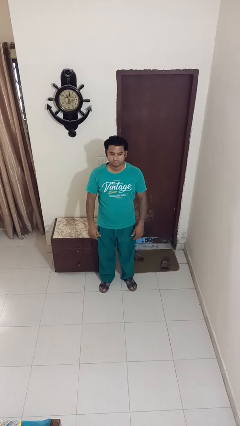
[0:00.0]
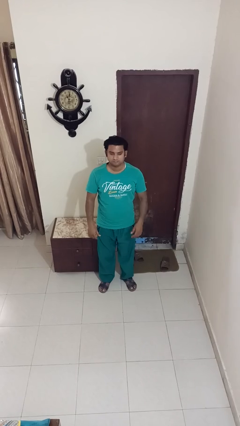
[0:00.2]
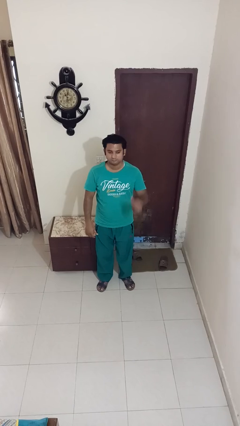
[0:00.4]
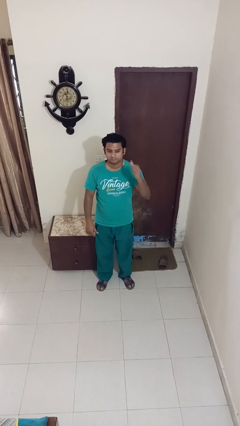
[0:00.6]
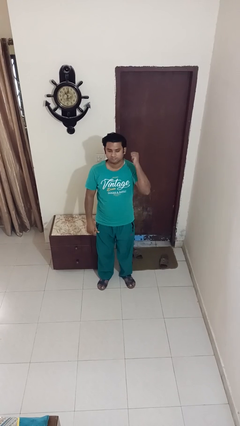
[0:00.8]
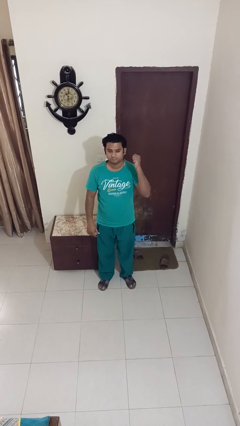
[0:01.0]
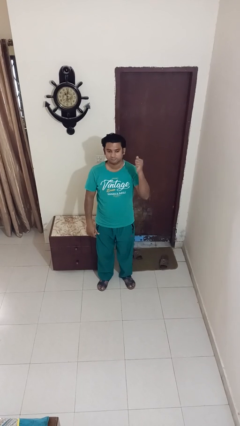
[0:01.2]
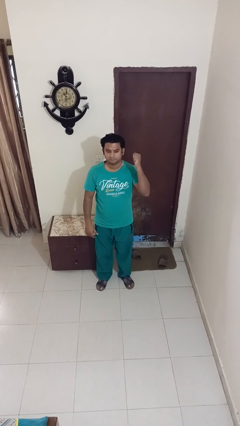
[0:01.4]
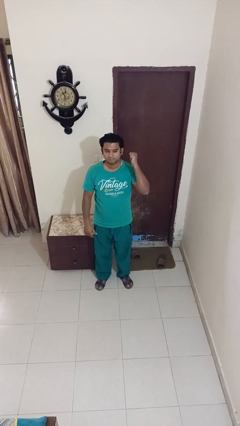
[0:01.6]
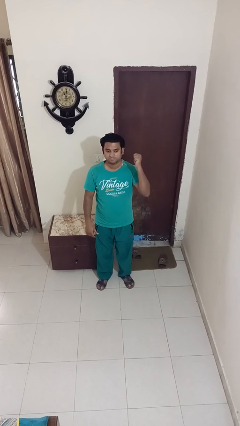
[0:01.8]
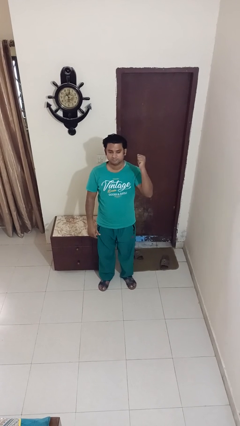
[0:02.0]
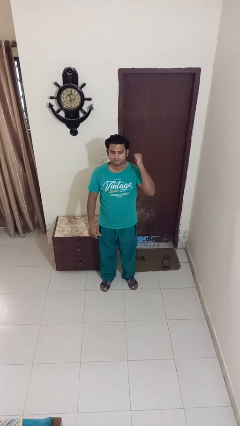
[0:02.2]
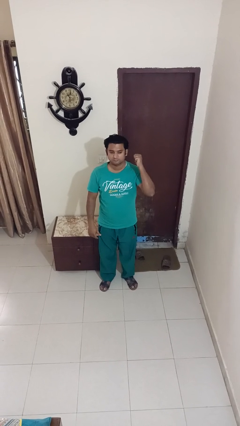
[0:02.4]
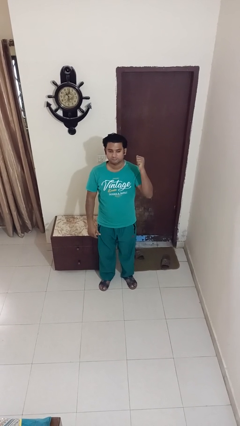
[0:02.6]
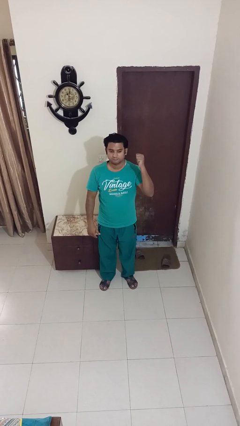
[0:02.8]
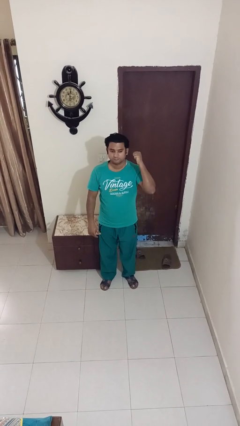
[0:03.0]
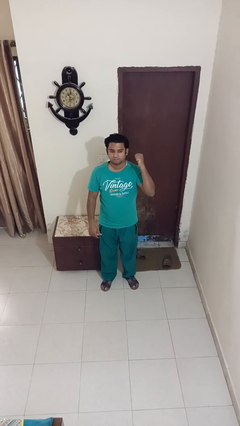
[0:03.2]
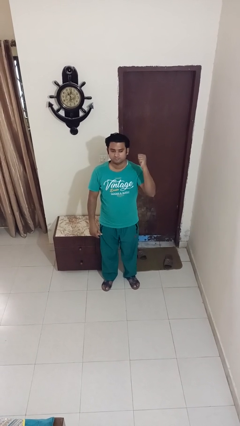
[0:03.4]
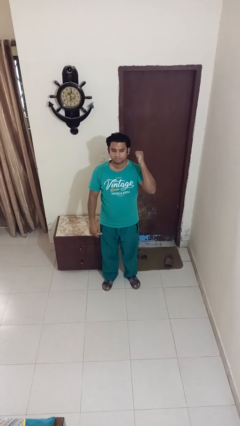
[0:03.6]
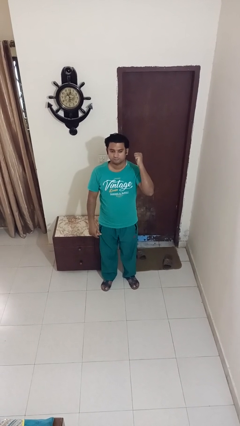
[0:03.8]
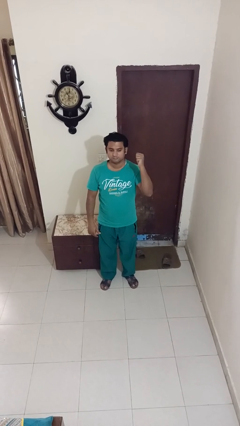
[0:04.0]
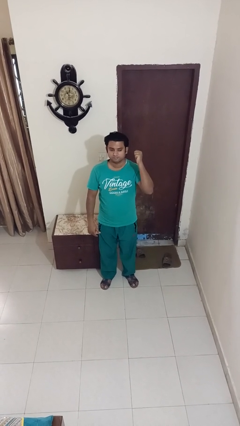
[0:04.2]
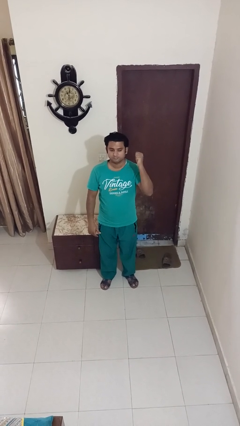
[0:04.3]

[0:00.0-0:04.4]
person gestures behind me

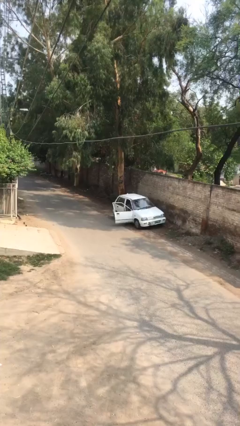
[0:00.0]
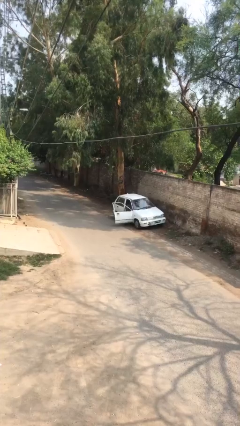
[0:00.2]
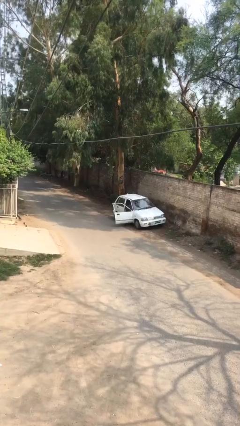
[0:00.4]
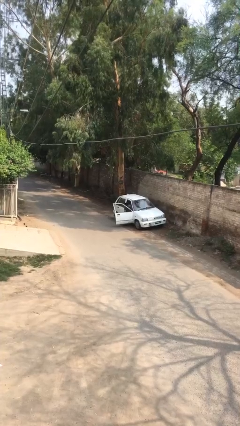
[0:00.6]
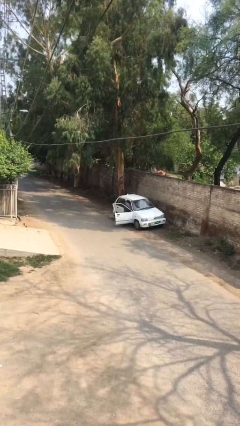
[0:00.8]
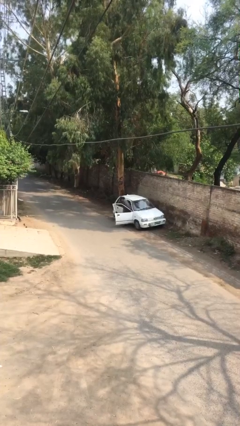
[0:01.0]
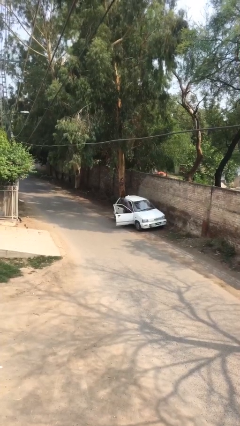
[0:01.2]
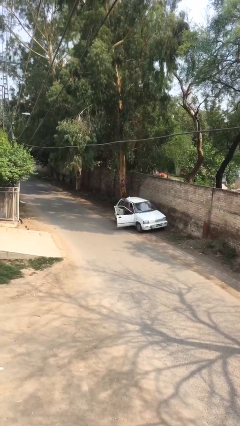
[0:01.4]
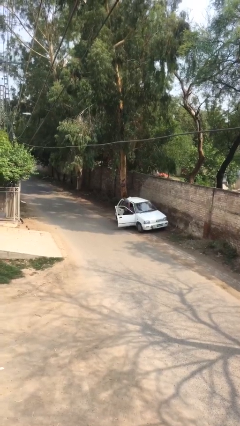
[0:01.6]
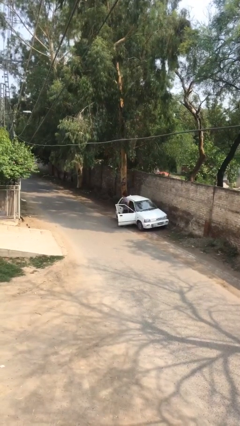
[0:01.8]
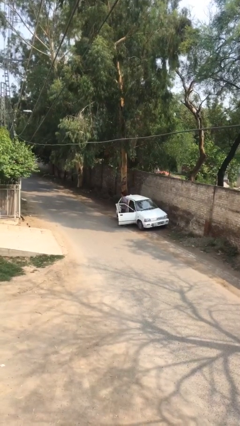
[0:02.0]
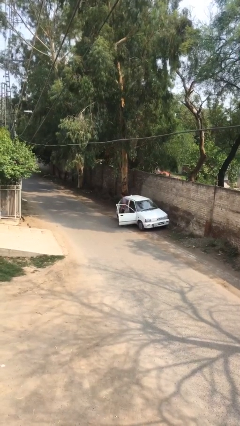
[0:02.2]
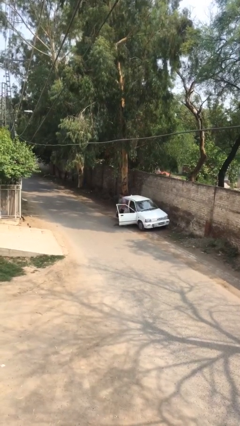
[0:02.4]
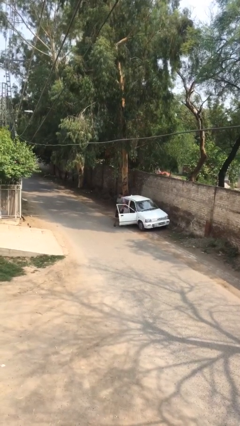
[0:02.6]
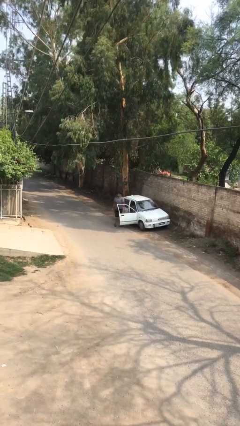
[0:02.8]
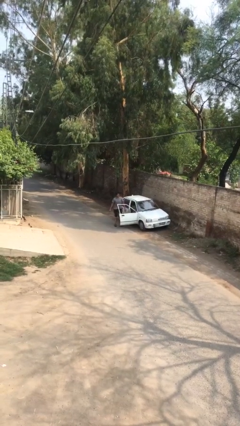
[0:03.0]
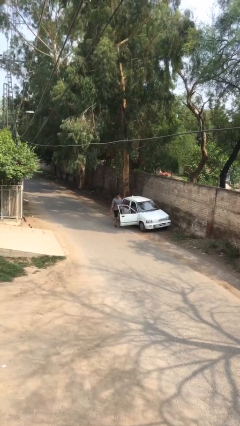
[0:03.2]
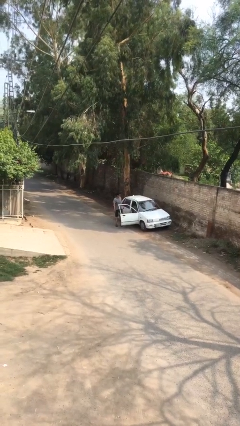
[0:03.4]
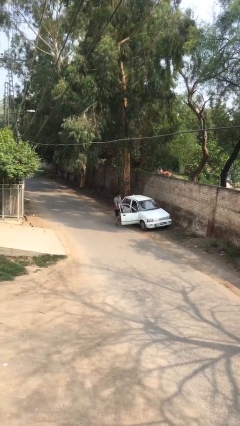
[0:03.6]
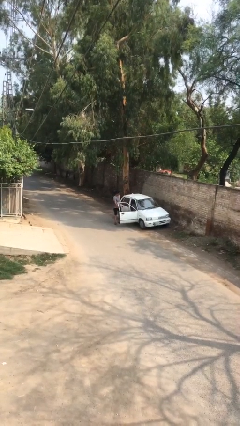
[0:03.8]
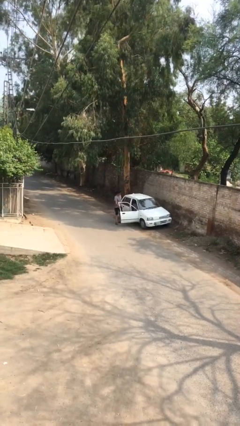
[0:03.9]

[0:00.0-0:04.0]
person exits car

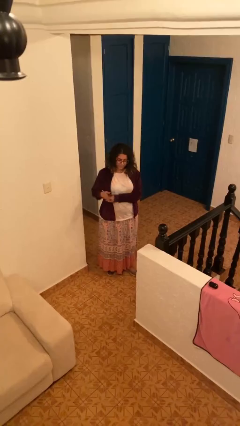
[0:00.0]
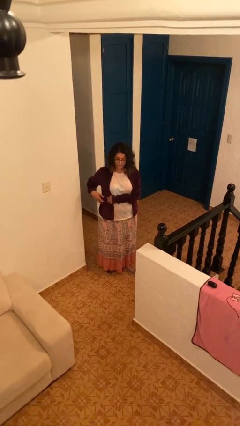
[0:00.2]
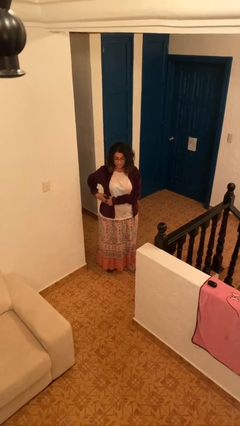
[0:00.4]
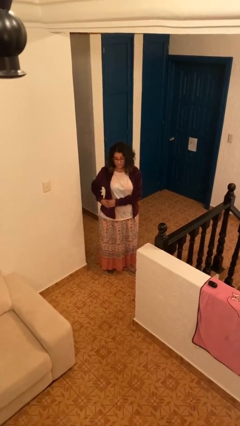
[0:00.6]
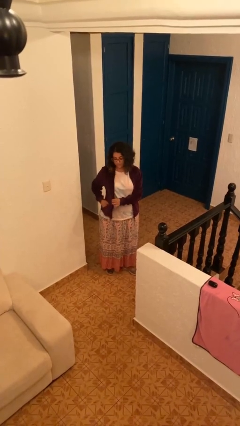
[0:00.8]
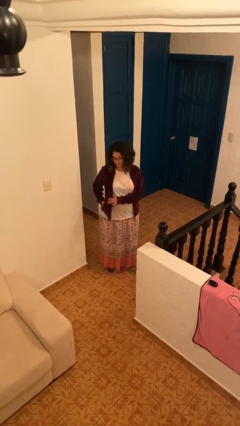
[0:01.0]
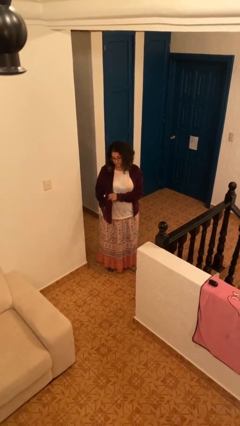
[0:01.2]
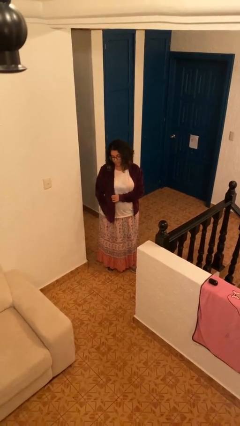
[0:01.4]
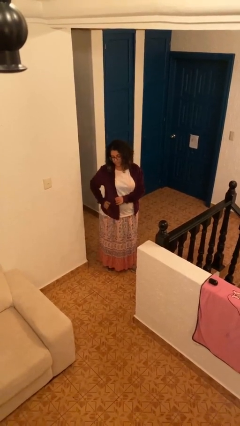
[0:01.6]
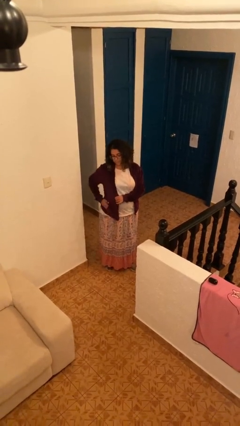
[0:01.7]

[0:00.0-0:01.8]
person puts phone into pocket

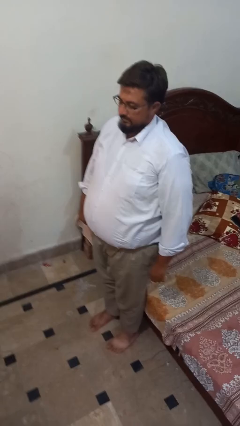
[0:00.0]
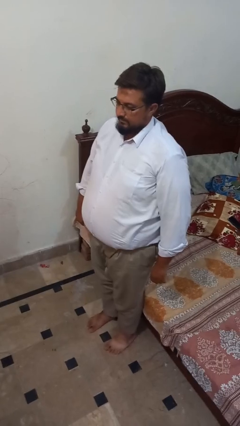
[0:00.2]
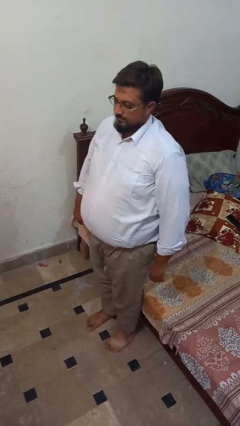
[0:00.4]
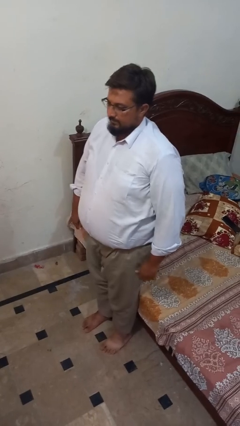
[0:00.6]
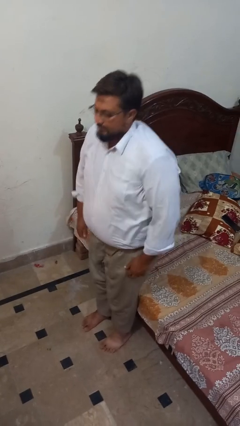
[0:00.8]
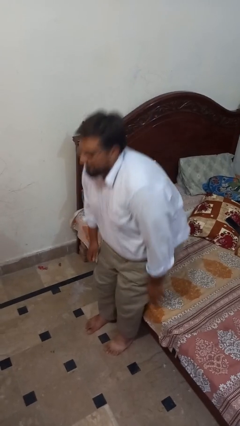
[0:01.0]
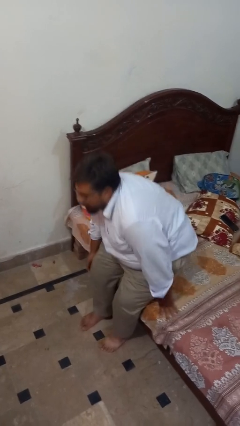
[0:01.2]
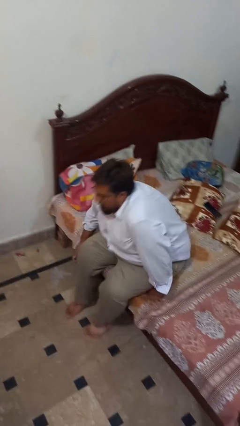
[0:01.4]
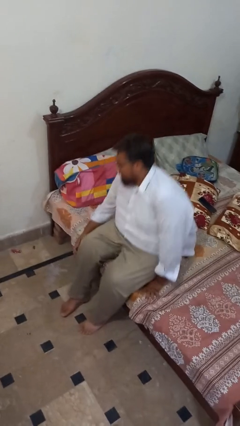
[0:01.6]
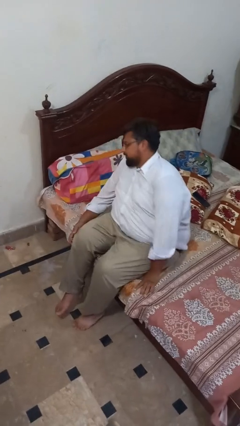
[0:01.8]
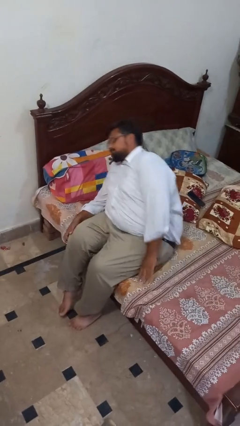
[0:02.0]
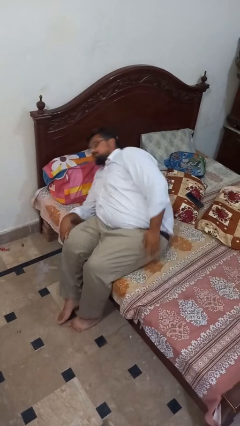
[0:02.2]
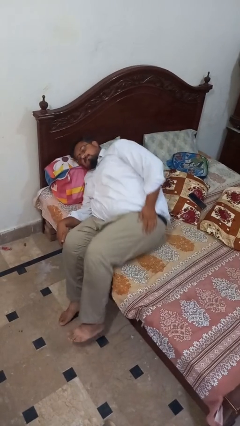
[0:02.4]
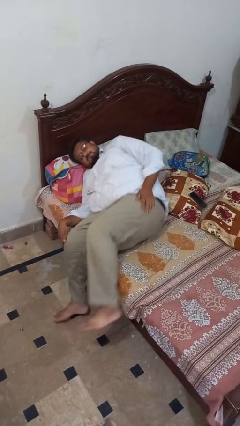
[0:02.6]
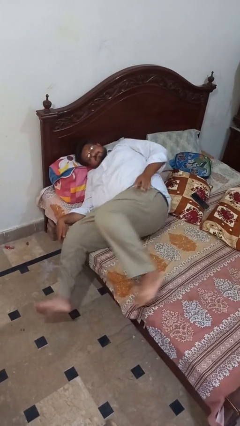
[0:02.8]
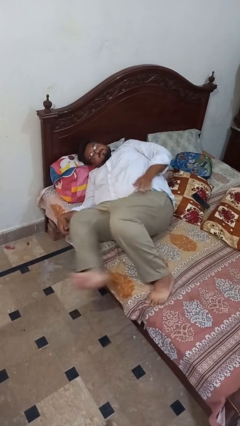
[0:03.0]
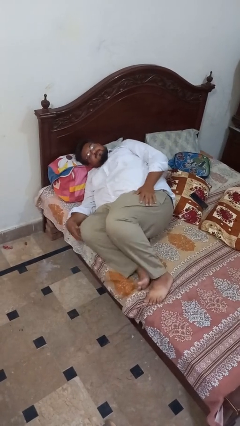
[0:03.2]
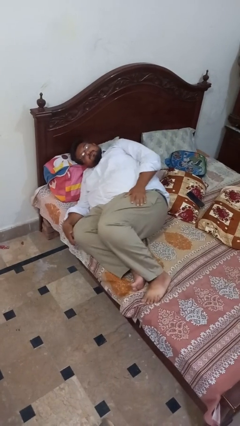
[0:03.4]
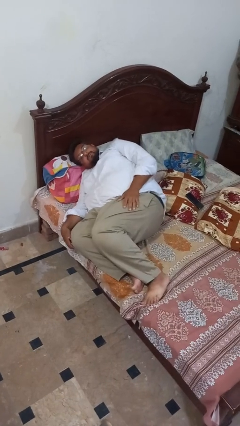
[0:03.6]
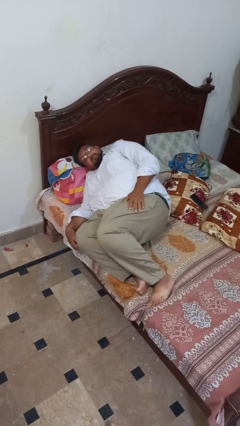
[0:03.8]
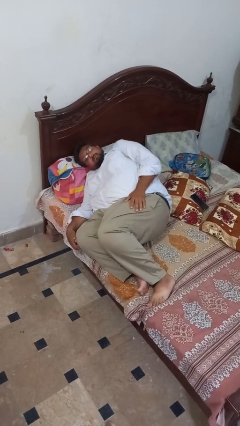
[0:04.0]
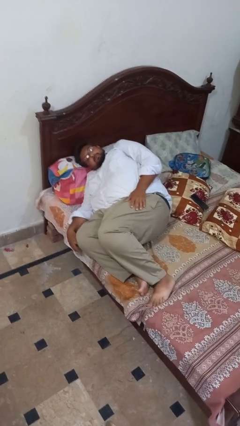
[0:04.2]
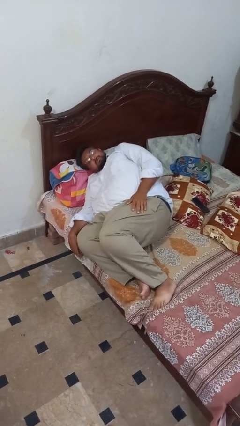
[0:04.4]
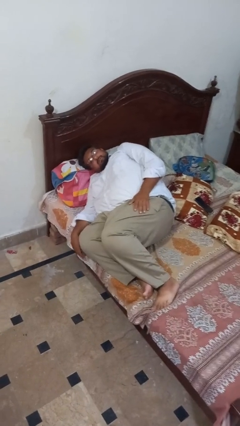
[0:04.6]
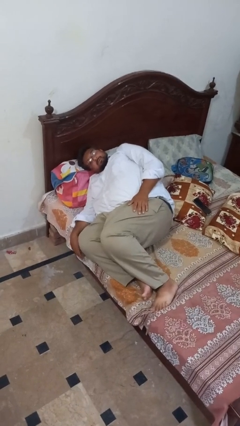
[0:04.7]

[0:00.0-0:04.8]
person lies down on bed

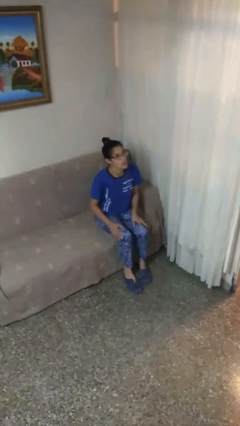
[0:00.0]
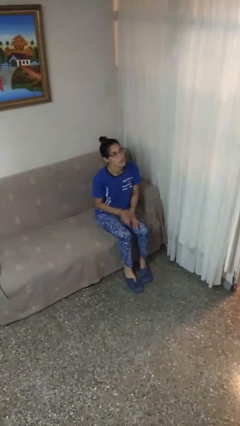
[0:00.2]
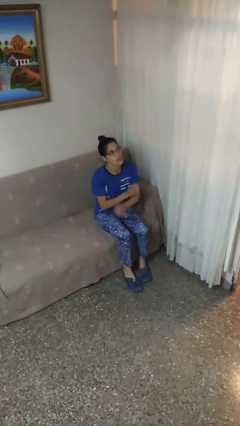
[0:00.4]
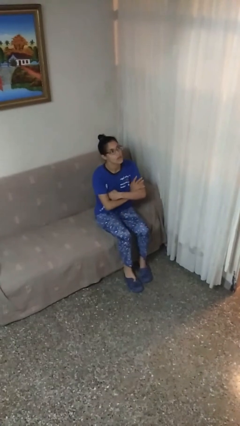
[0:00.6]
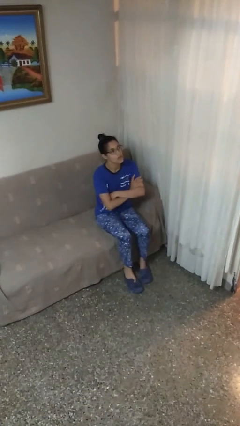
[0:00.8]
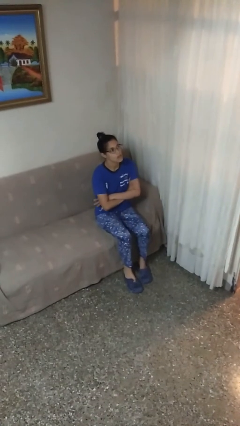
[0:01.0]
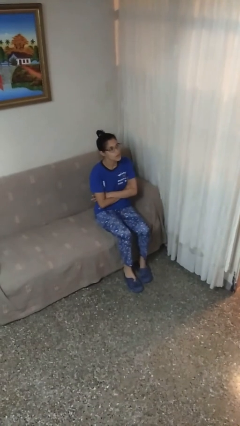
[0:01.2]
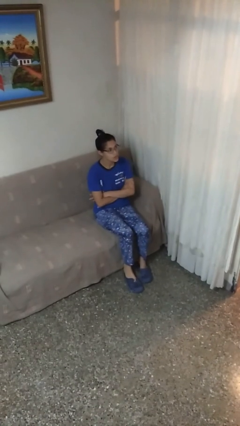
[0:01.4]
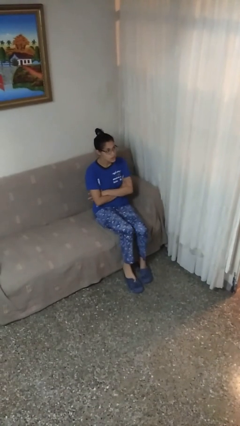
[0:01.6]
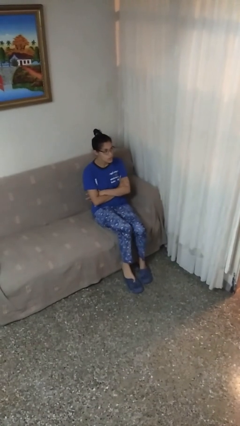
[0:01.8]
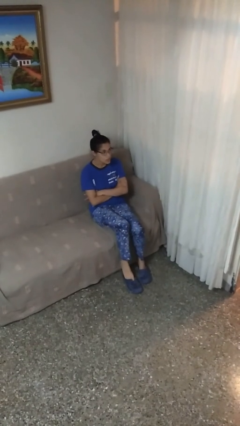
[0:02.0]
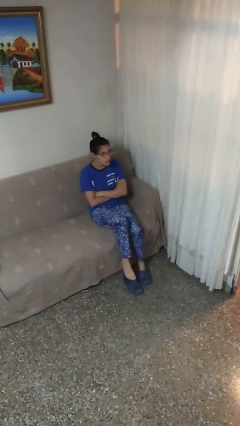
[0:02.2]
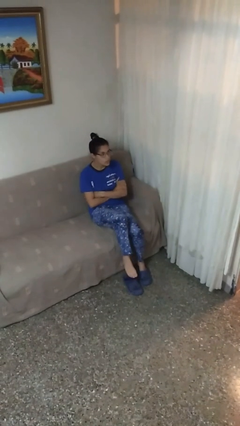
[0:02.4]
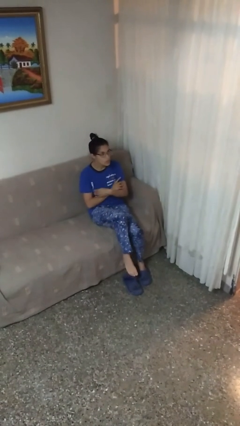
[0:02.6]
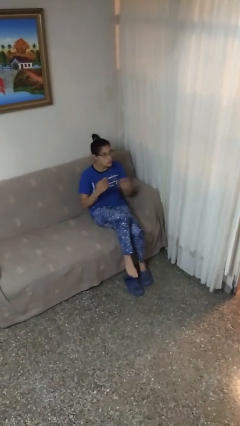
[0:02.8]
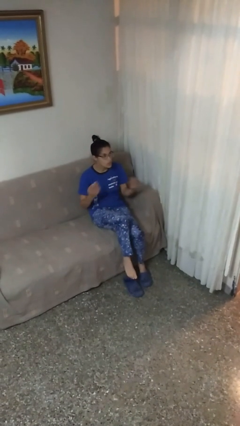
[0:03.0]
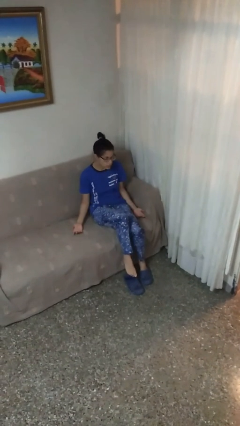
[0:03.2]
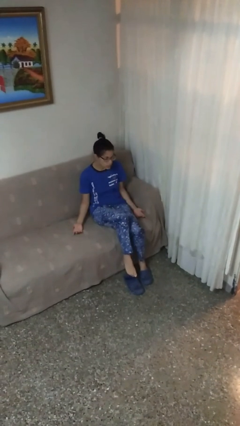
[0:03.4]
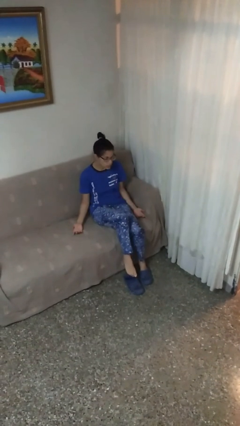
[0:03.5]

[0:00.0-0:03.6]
person crosses arms
